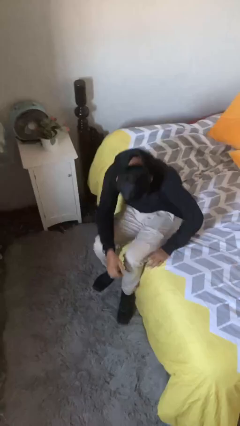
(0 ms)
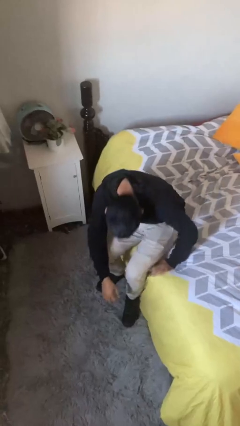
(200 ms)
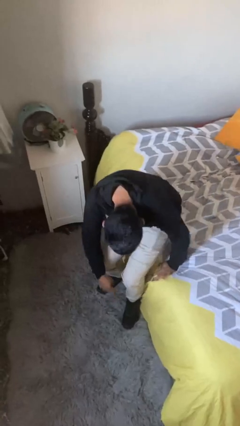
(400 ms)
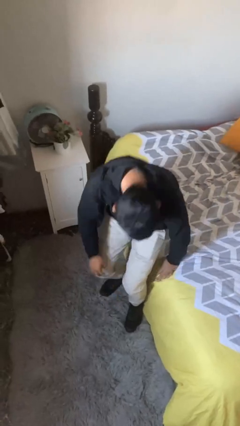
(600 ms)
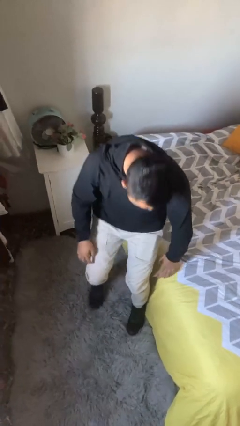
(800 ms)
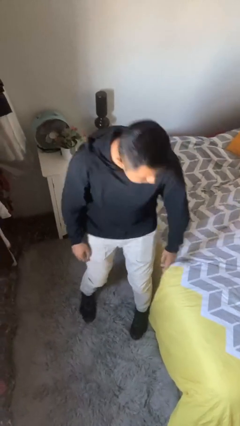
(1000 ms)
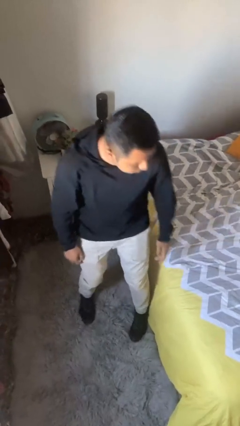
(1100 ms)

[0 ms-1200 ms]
person stands up

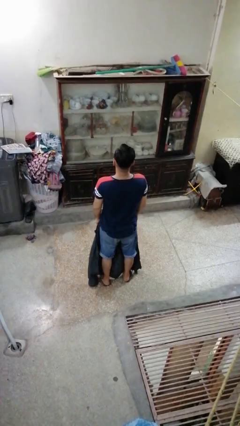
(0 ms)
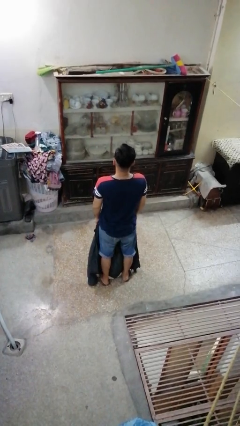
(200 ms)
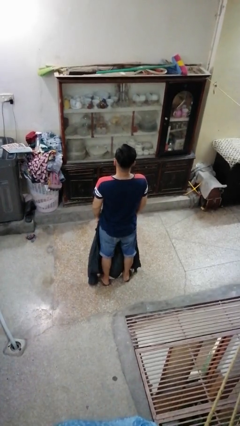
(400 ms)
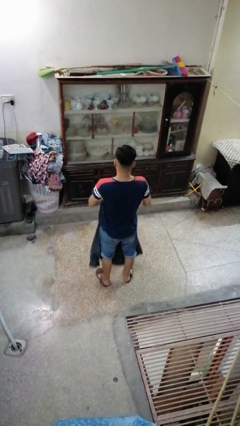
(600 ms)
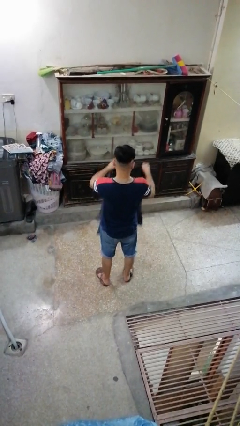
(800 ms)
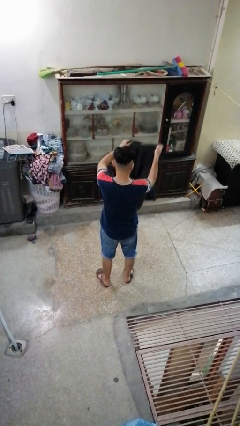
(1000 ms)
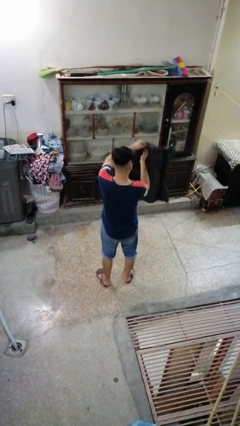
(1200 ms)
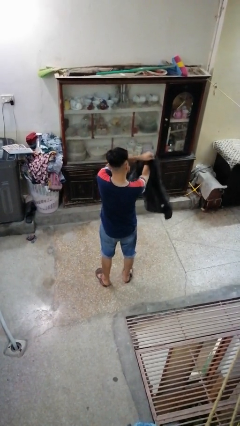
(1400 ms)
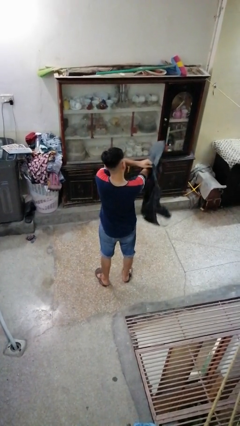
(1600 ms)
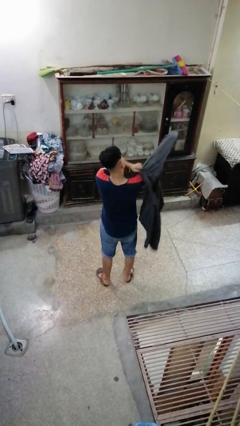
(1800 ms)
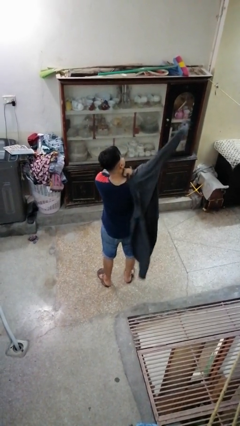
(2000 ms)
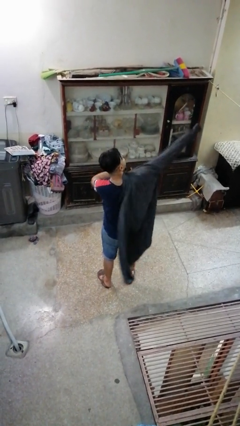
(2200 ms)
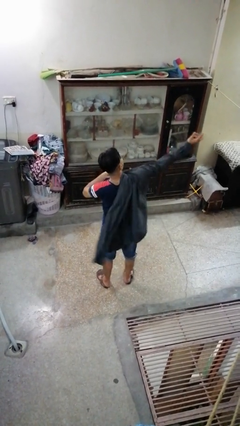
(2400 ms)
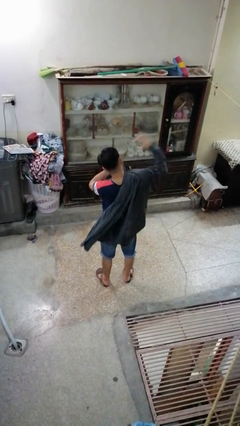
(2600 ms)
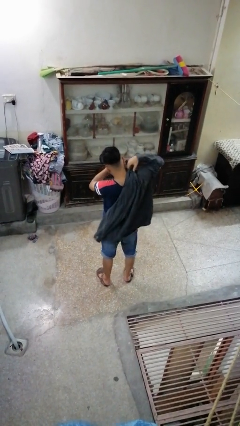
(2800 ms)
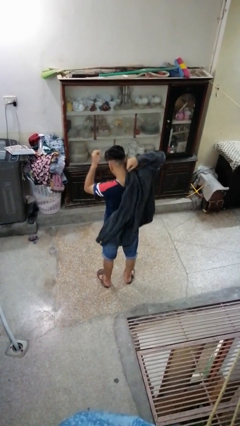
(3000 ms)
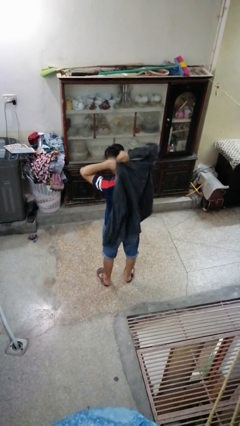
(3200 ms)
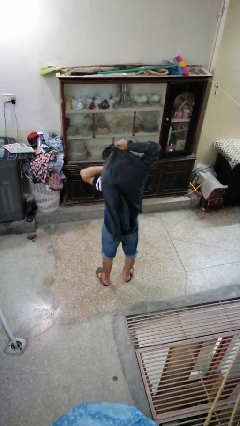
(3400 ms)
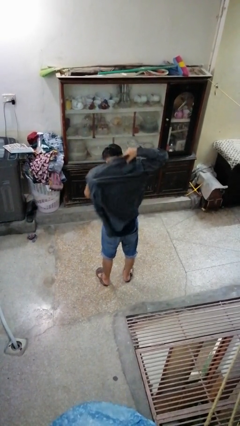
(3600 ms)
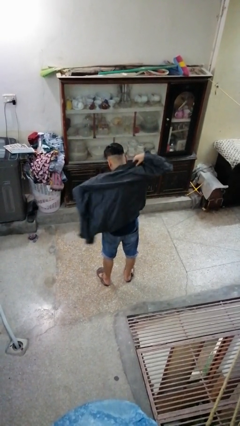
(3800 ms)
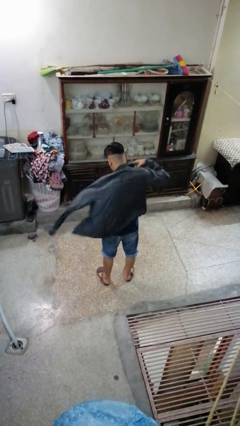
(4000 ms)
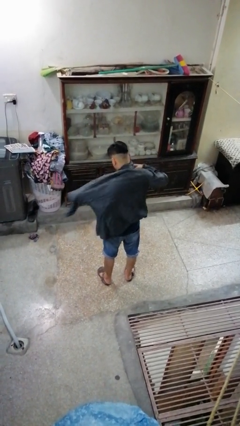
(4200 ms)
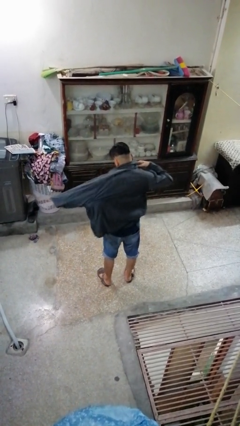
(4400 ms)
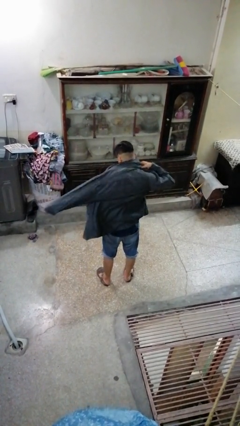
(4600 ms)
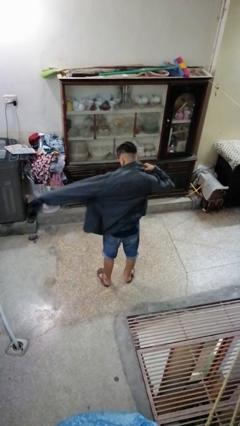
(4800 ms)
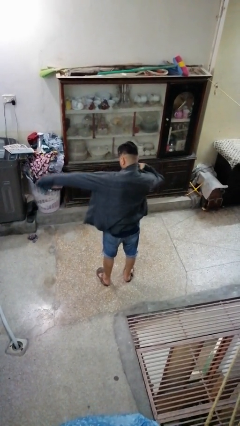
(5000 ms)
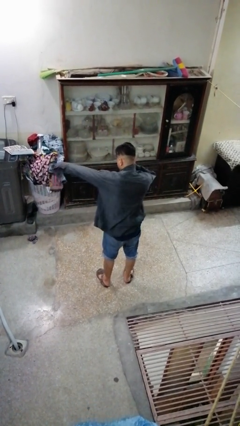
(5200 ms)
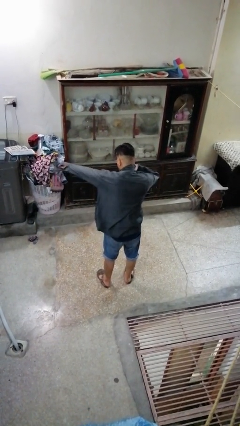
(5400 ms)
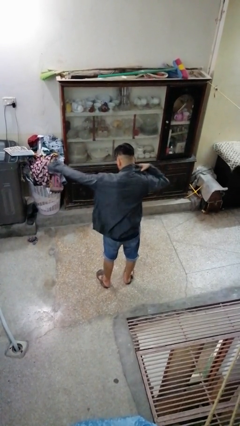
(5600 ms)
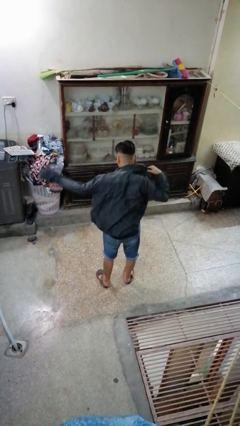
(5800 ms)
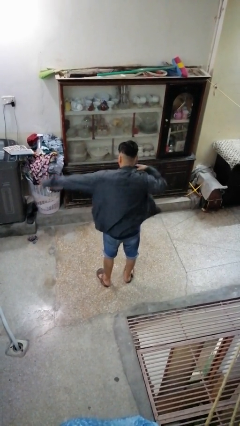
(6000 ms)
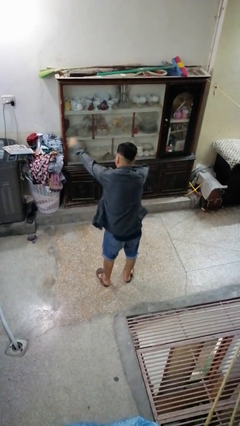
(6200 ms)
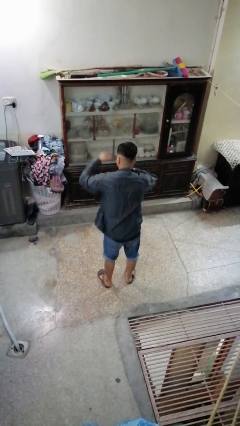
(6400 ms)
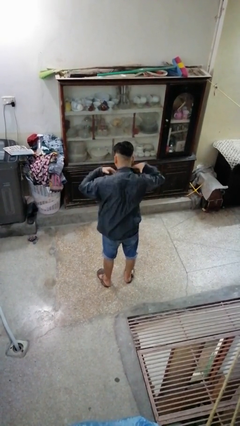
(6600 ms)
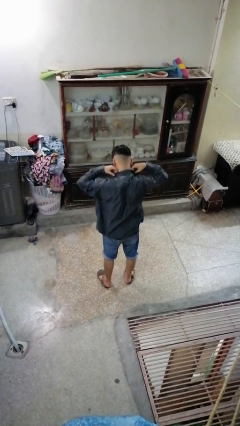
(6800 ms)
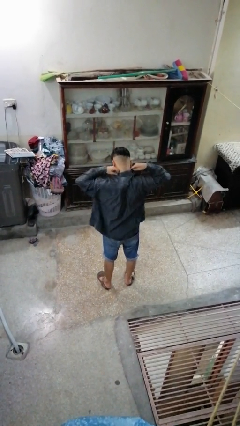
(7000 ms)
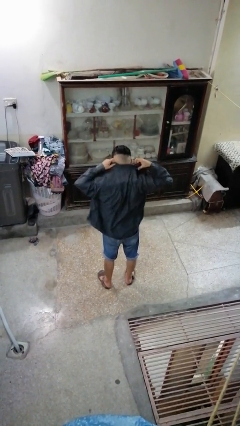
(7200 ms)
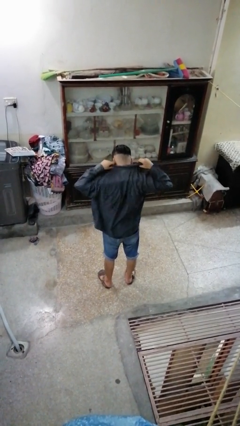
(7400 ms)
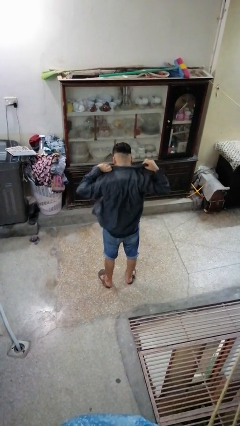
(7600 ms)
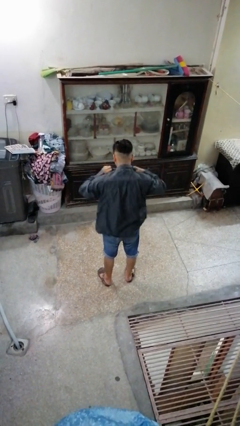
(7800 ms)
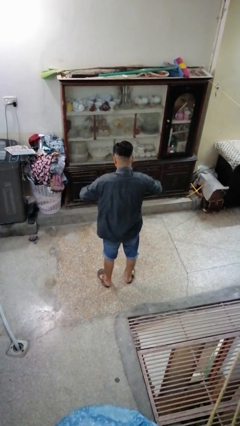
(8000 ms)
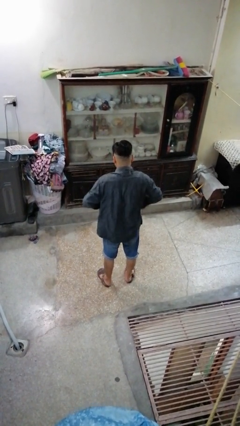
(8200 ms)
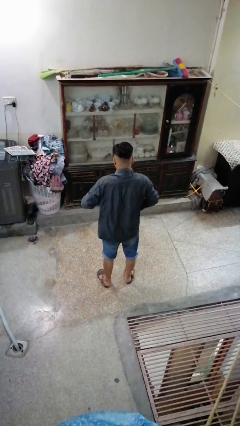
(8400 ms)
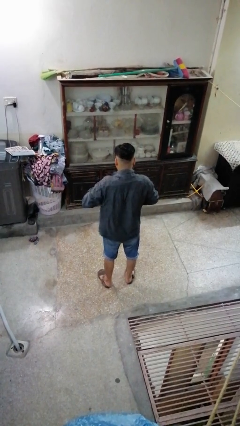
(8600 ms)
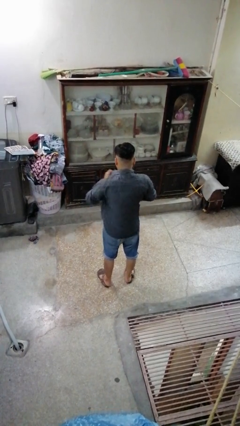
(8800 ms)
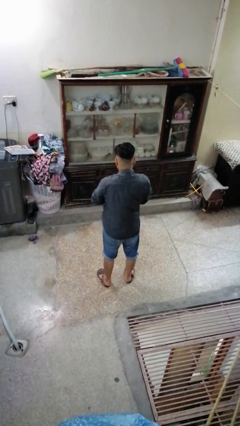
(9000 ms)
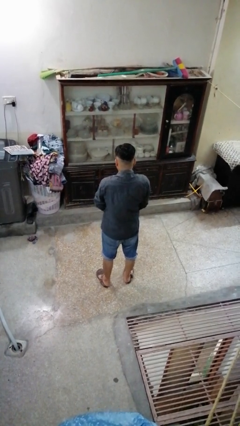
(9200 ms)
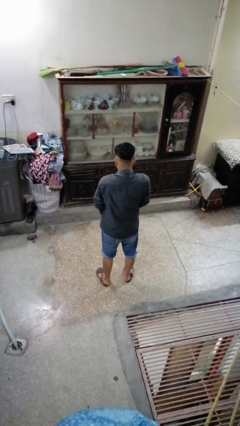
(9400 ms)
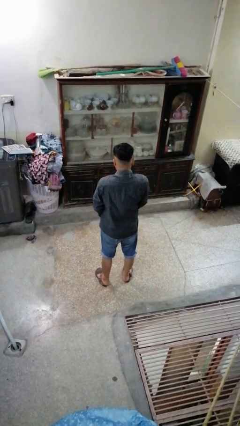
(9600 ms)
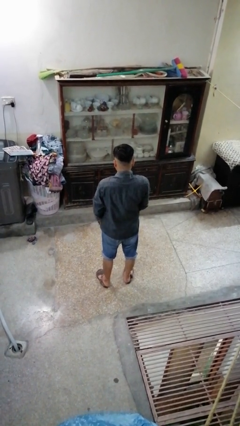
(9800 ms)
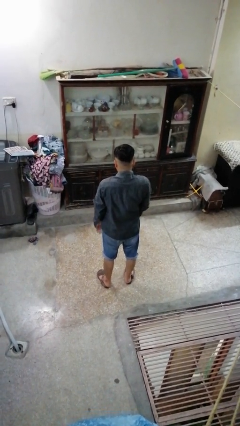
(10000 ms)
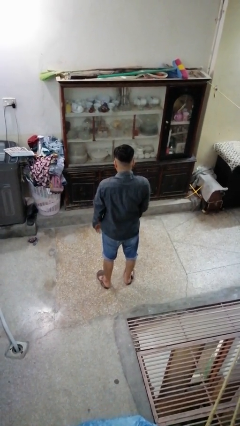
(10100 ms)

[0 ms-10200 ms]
person puts on shirt

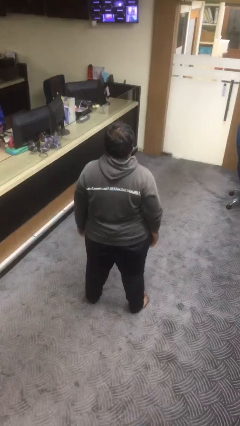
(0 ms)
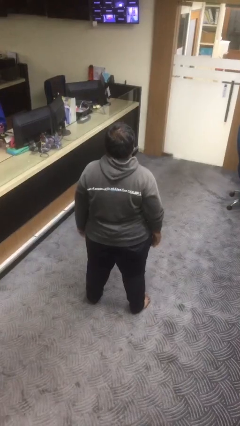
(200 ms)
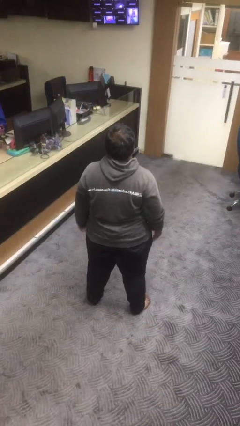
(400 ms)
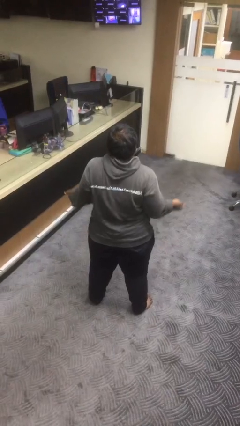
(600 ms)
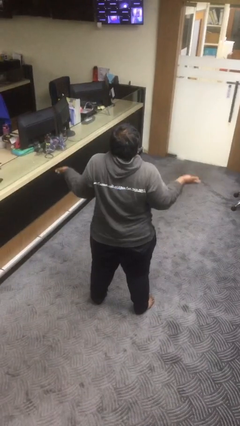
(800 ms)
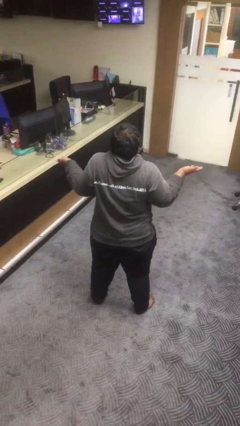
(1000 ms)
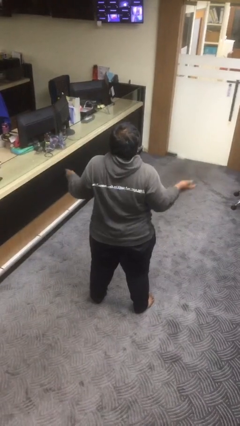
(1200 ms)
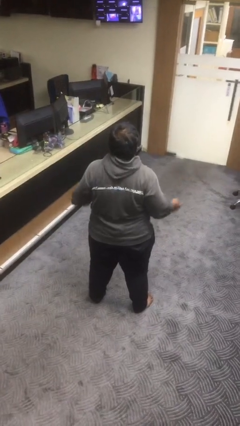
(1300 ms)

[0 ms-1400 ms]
person shrugs

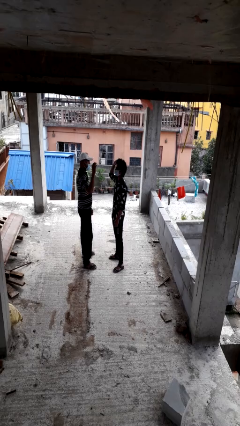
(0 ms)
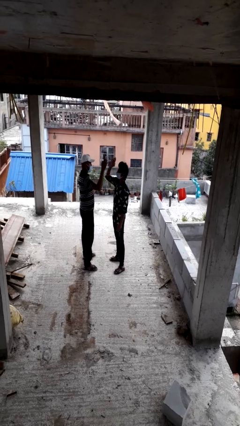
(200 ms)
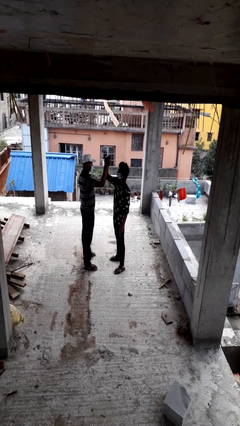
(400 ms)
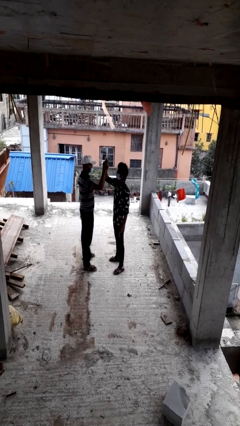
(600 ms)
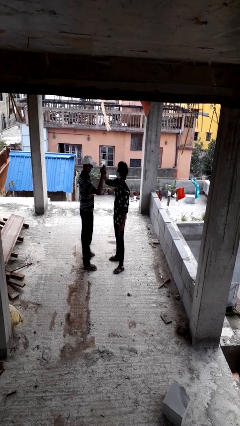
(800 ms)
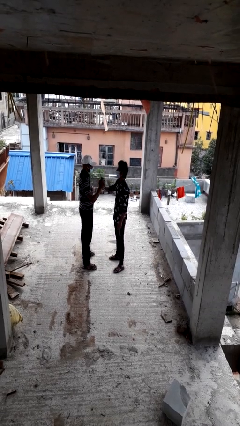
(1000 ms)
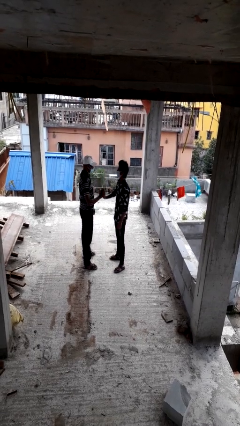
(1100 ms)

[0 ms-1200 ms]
person highfives hand

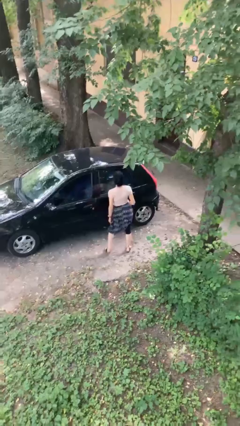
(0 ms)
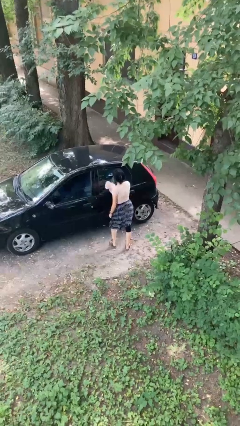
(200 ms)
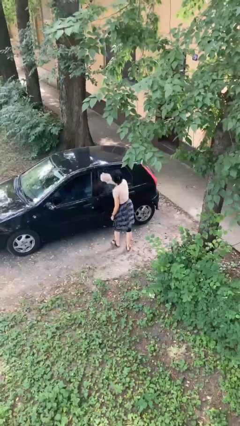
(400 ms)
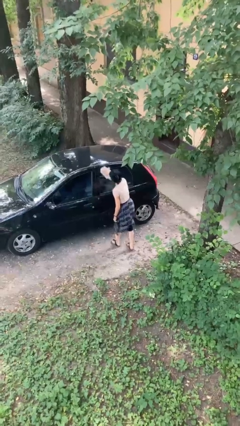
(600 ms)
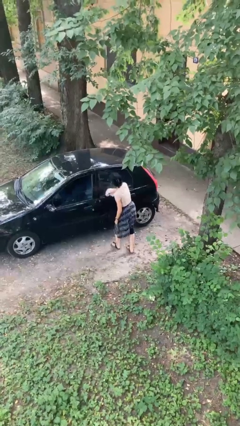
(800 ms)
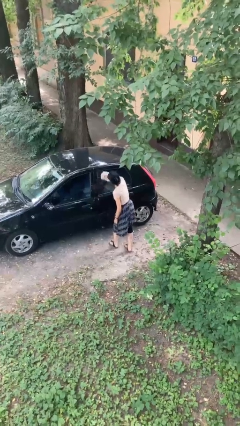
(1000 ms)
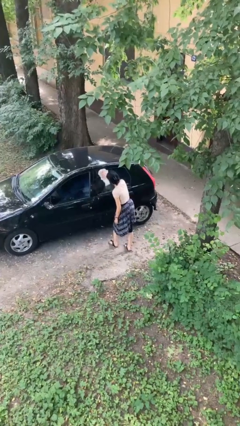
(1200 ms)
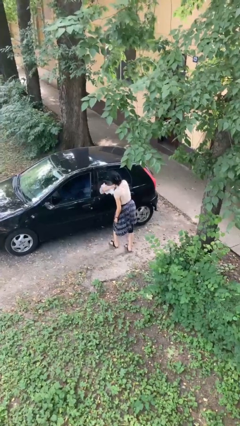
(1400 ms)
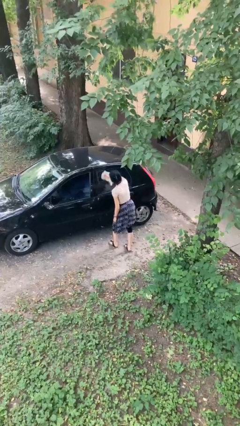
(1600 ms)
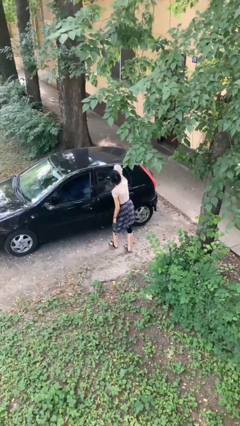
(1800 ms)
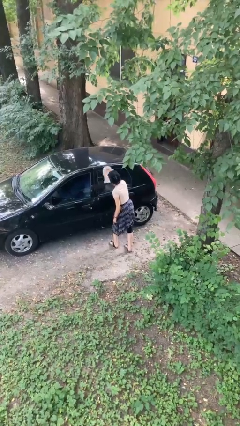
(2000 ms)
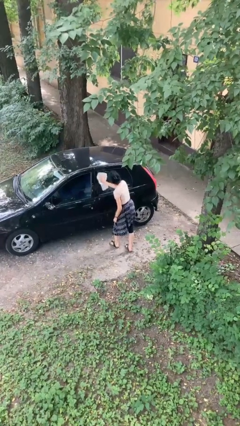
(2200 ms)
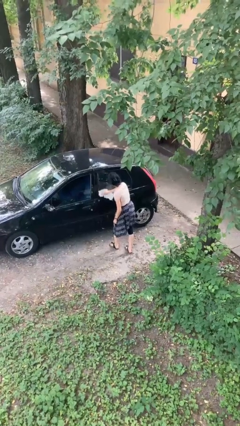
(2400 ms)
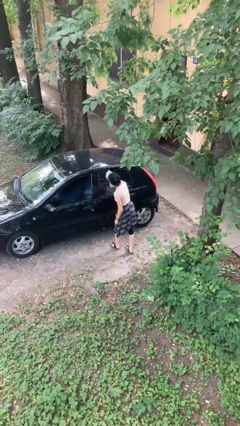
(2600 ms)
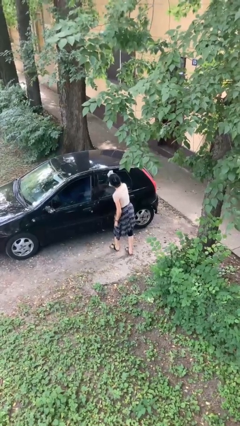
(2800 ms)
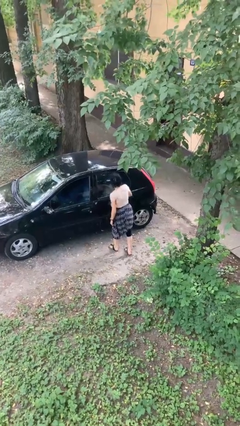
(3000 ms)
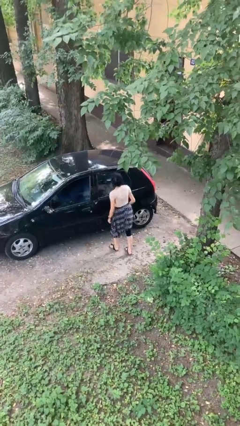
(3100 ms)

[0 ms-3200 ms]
person polishes car with rag

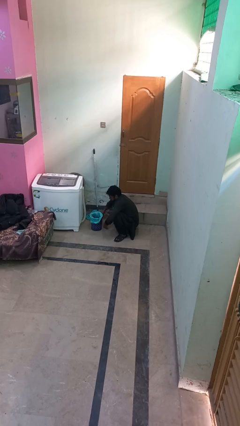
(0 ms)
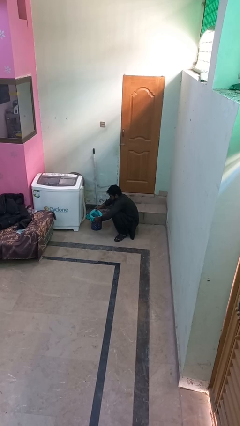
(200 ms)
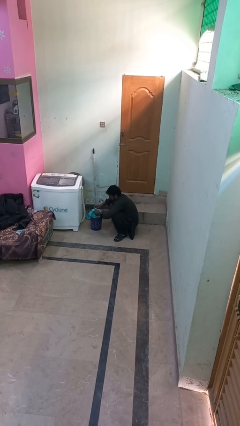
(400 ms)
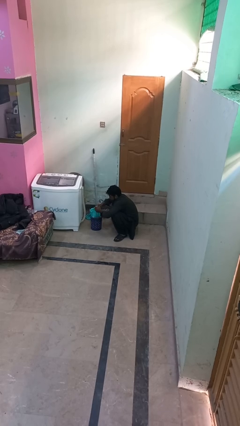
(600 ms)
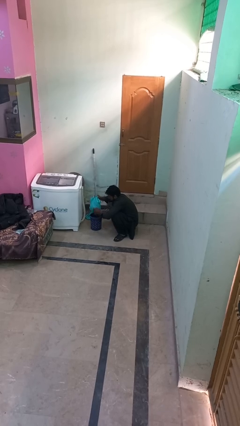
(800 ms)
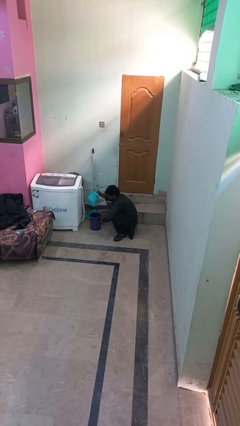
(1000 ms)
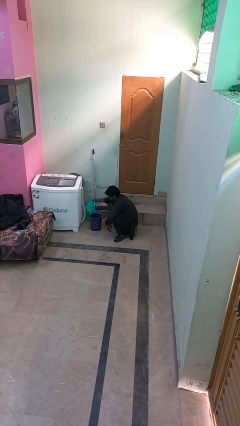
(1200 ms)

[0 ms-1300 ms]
person removes trashbag from trashcan
